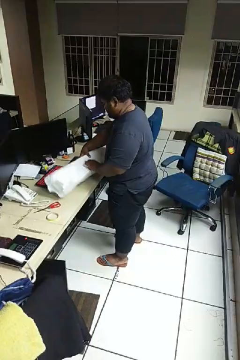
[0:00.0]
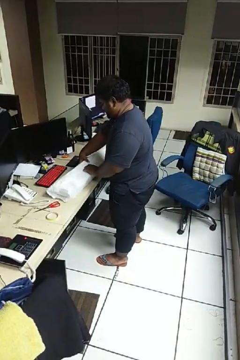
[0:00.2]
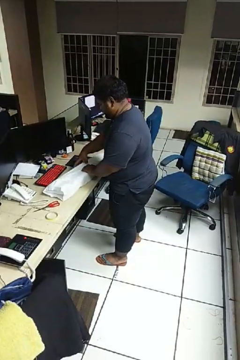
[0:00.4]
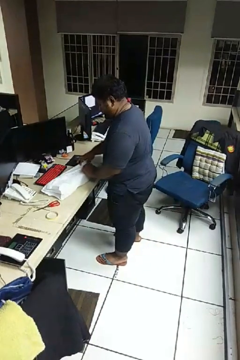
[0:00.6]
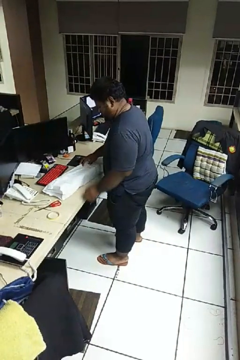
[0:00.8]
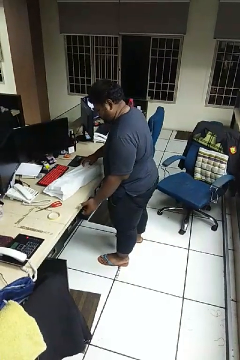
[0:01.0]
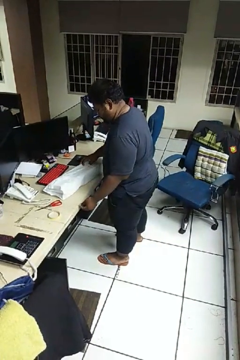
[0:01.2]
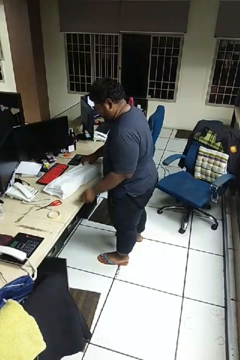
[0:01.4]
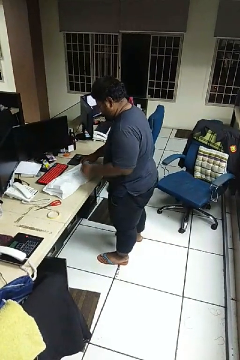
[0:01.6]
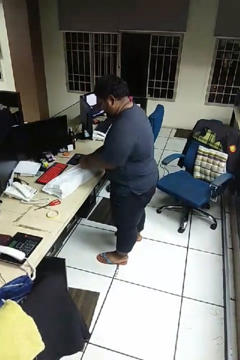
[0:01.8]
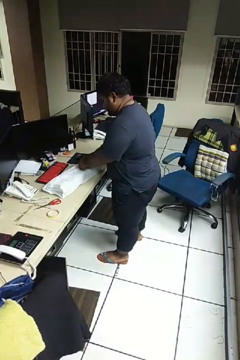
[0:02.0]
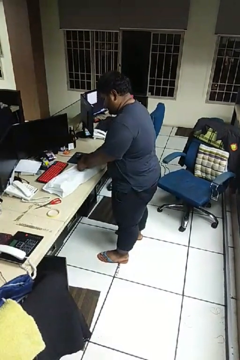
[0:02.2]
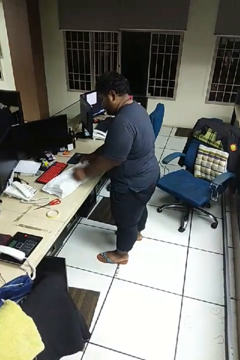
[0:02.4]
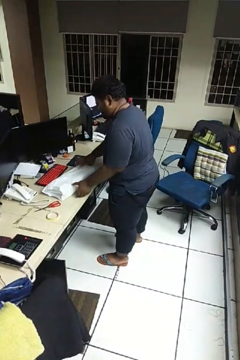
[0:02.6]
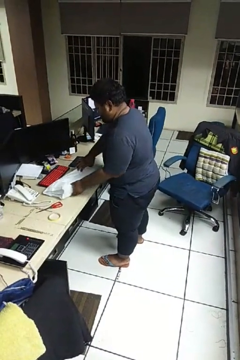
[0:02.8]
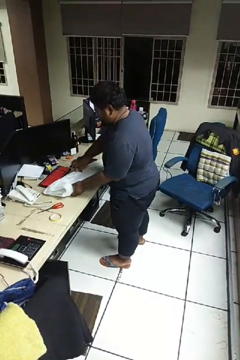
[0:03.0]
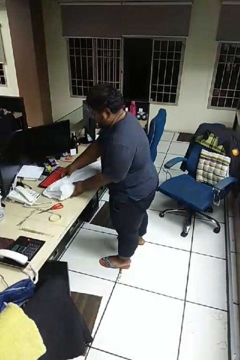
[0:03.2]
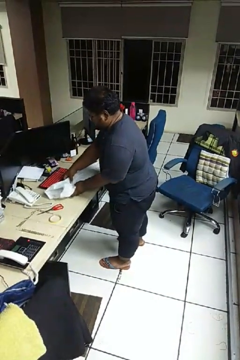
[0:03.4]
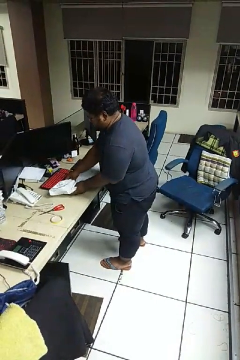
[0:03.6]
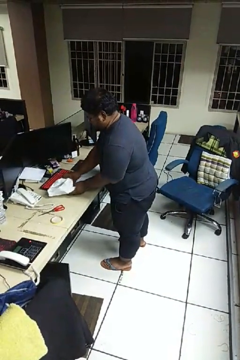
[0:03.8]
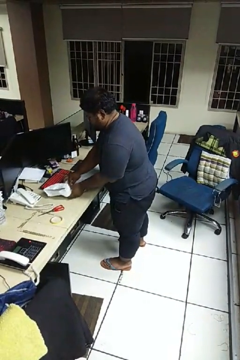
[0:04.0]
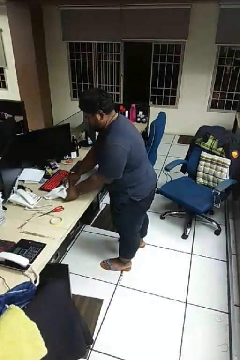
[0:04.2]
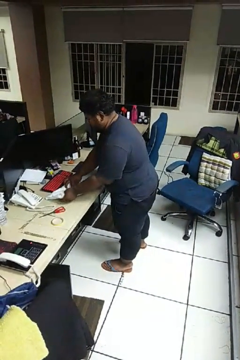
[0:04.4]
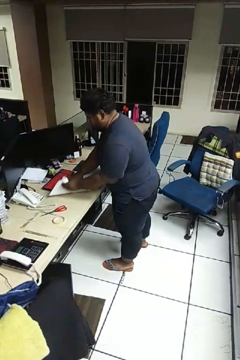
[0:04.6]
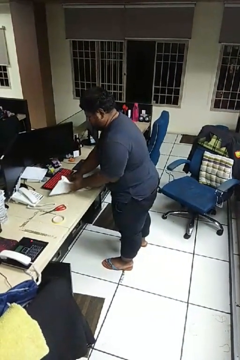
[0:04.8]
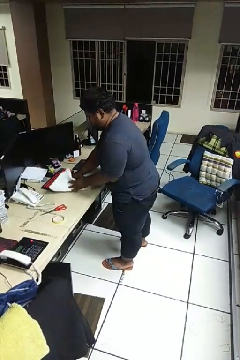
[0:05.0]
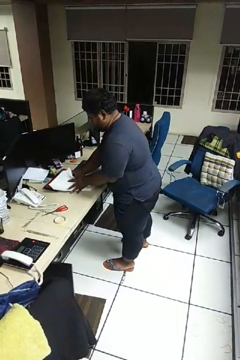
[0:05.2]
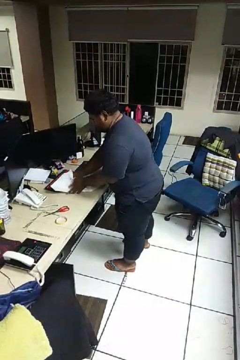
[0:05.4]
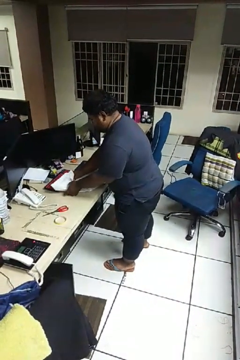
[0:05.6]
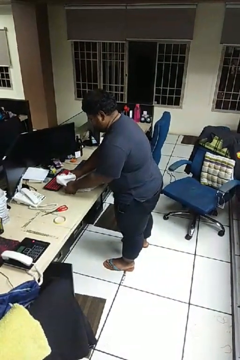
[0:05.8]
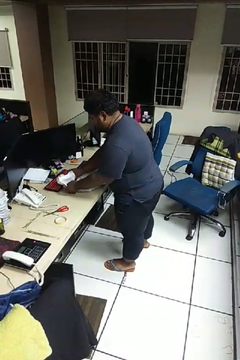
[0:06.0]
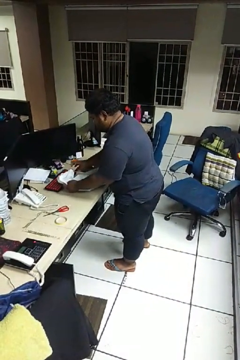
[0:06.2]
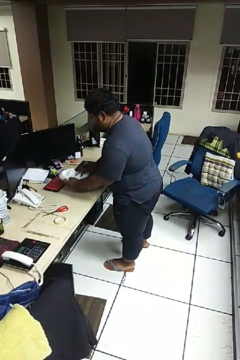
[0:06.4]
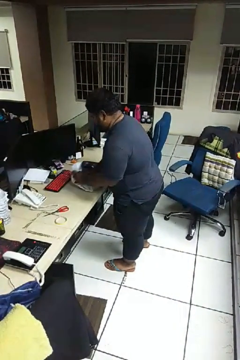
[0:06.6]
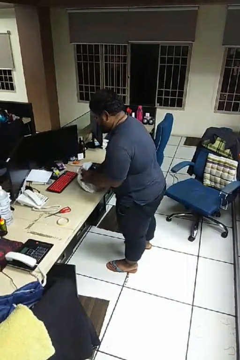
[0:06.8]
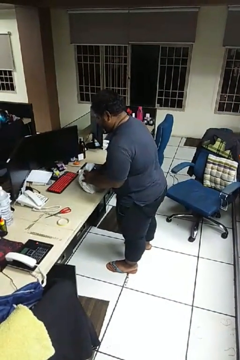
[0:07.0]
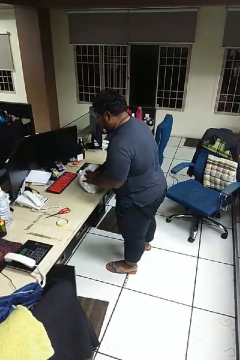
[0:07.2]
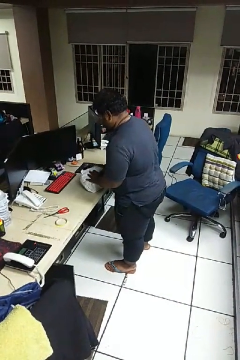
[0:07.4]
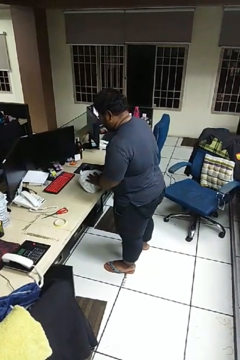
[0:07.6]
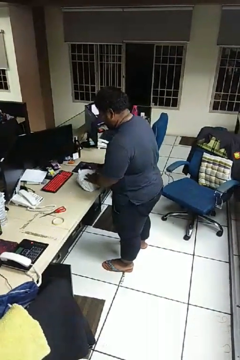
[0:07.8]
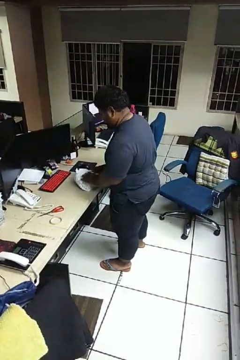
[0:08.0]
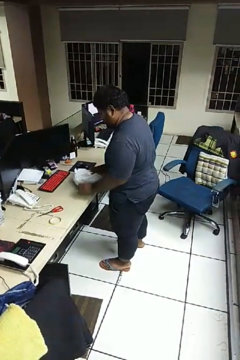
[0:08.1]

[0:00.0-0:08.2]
person wraps box

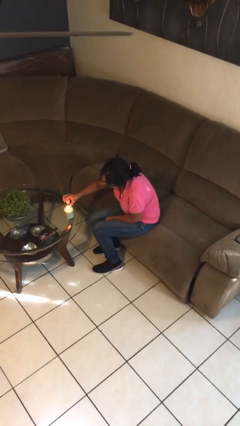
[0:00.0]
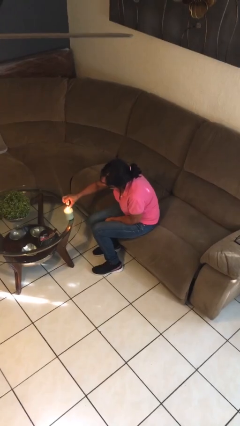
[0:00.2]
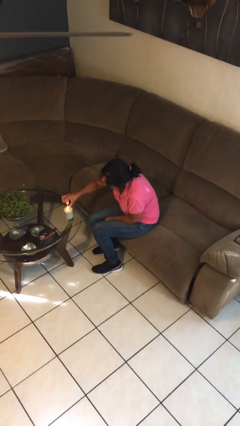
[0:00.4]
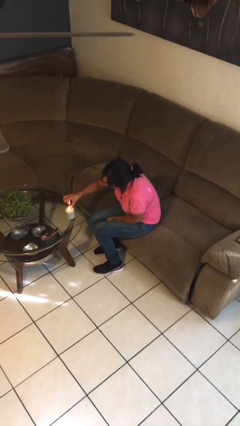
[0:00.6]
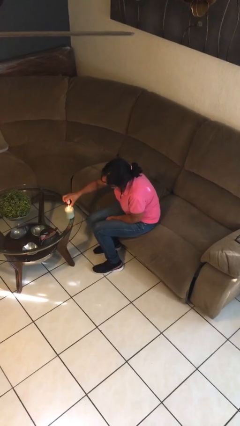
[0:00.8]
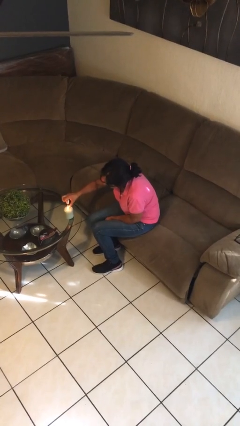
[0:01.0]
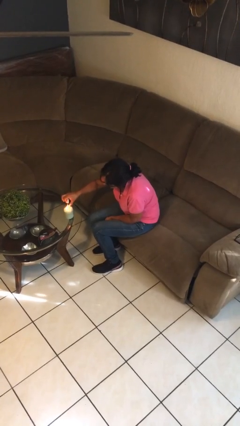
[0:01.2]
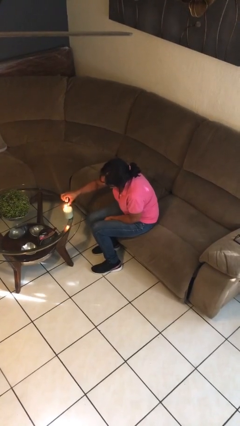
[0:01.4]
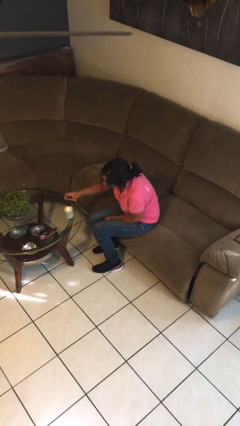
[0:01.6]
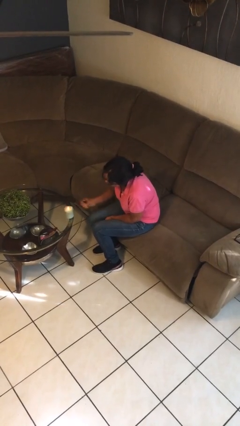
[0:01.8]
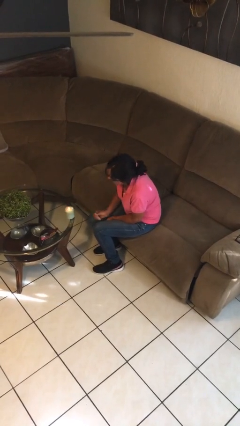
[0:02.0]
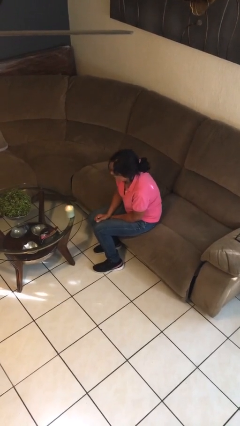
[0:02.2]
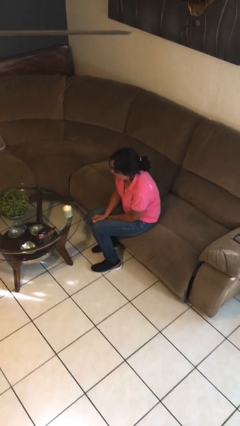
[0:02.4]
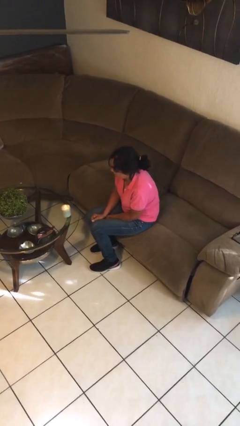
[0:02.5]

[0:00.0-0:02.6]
person lights candle

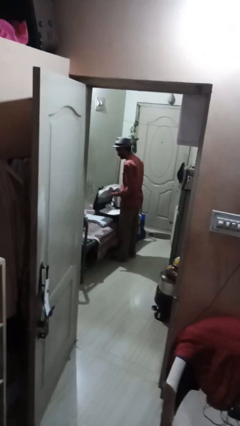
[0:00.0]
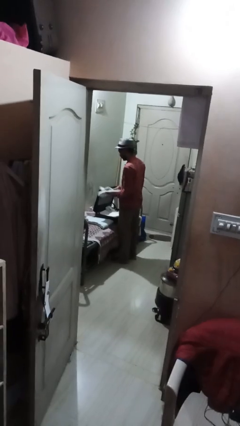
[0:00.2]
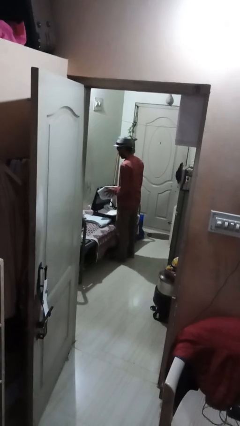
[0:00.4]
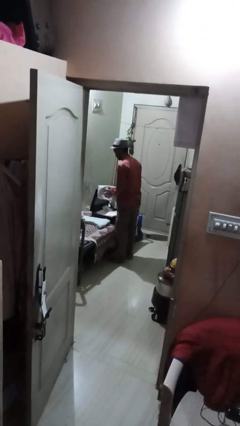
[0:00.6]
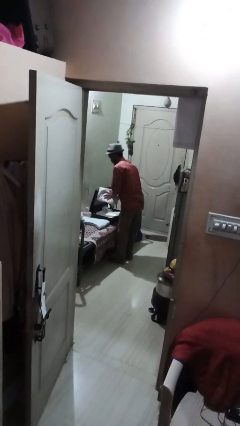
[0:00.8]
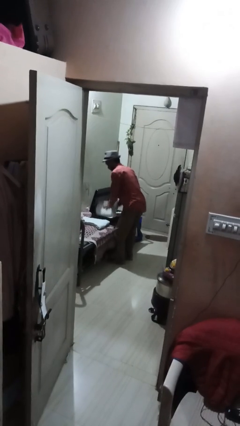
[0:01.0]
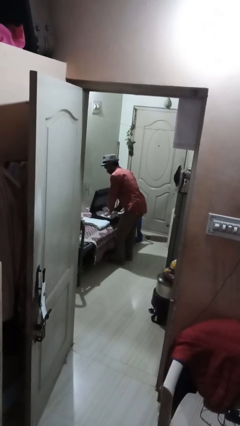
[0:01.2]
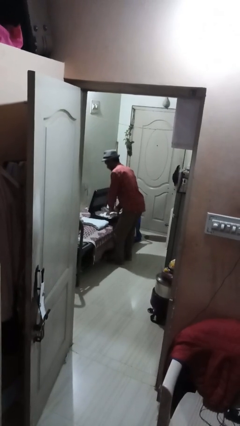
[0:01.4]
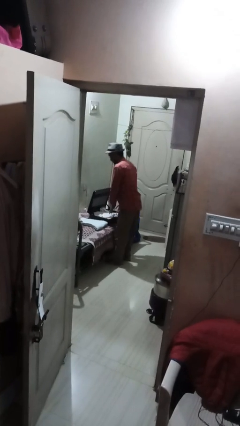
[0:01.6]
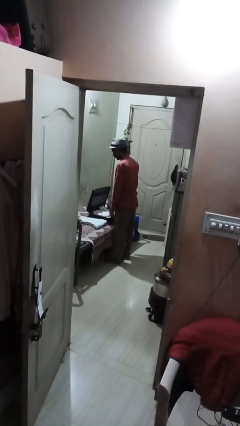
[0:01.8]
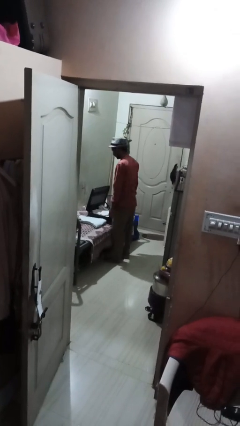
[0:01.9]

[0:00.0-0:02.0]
person loads clothes into suitcase

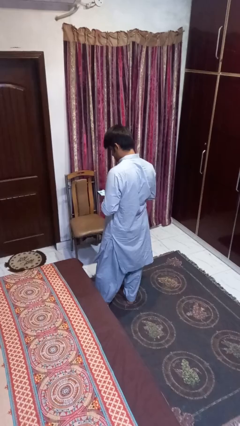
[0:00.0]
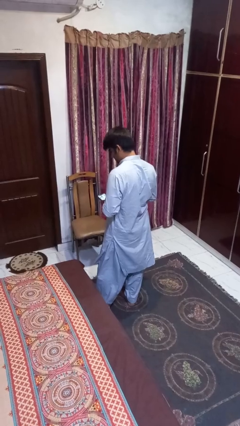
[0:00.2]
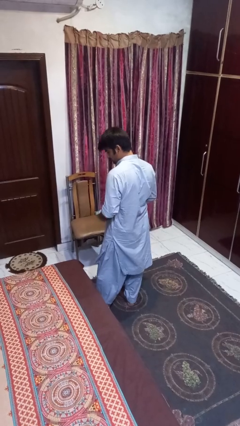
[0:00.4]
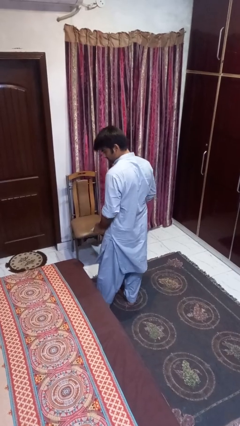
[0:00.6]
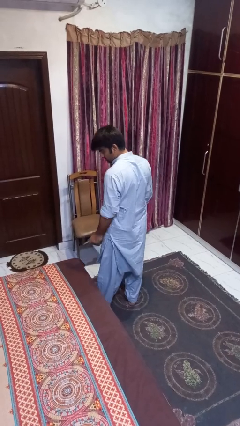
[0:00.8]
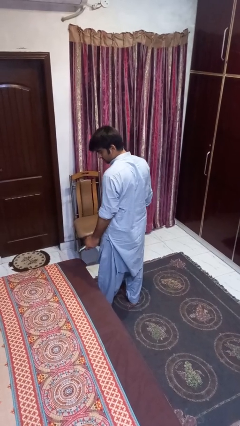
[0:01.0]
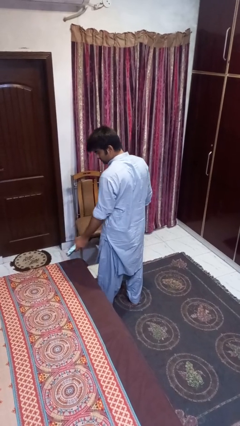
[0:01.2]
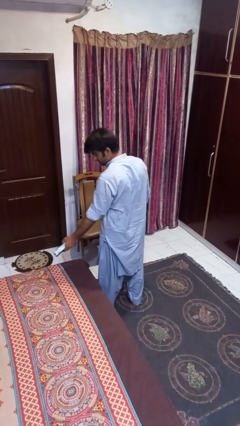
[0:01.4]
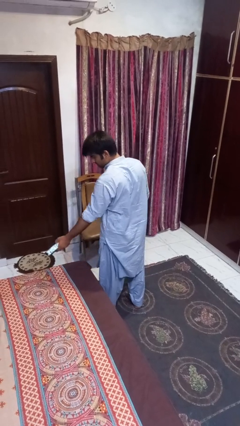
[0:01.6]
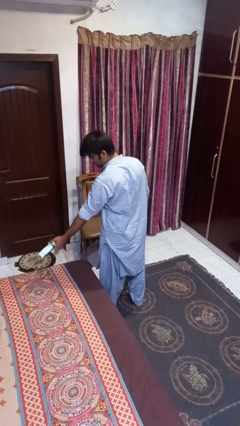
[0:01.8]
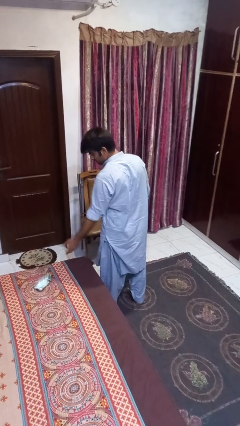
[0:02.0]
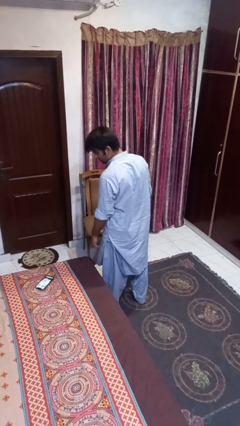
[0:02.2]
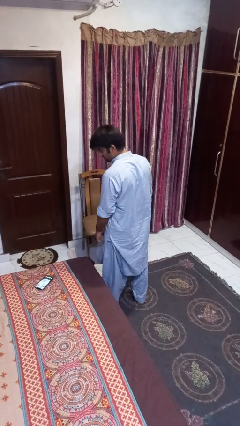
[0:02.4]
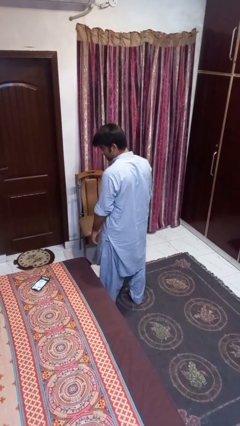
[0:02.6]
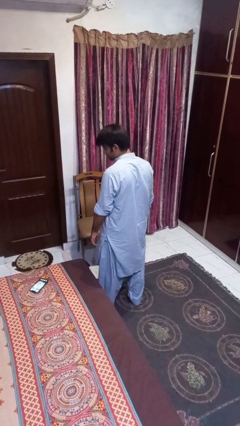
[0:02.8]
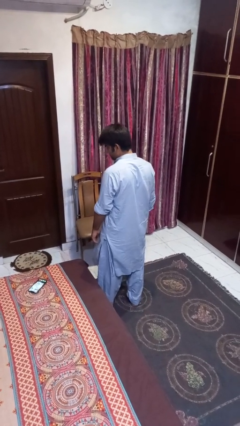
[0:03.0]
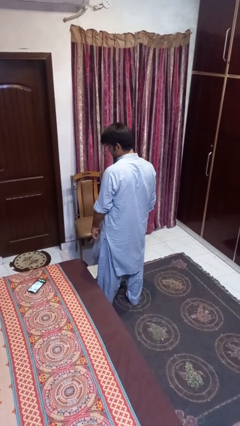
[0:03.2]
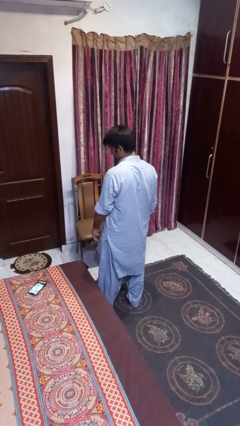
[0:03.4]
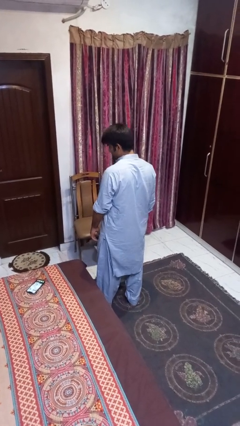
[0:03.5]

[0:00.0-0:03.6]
person throws object on bed

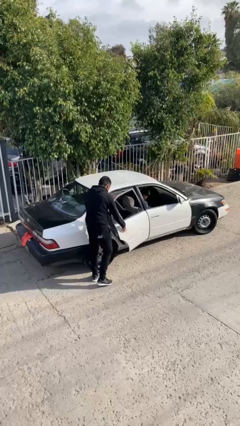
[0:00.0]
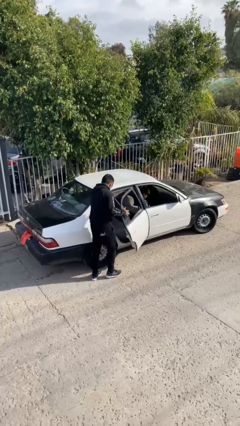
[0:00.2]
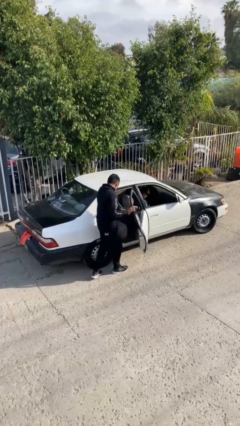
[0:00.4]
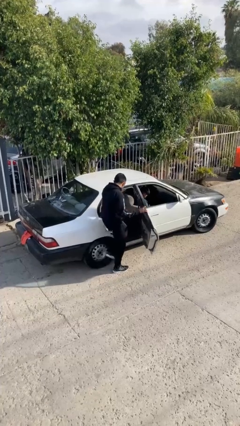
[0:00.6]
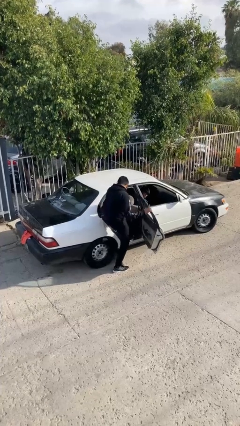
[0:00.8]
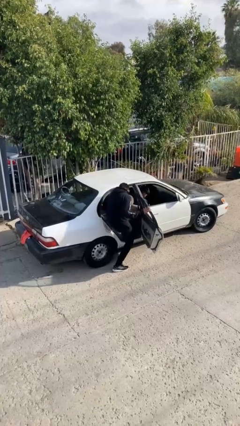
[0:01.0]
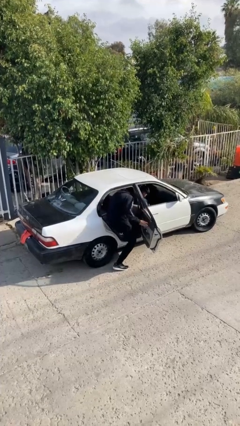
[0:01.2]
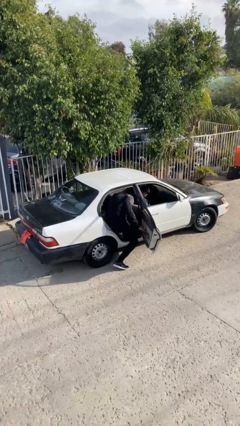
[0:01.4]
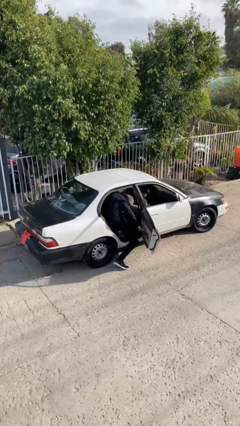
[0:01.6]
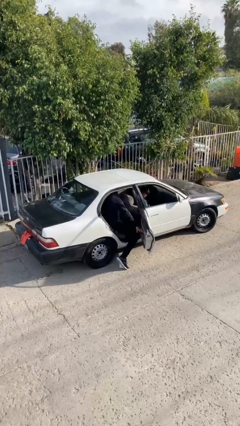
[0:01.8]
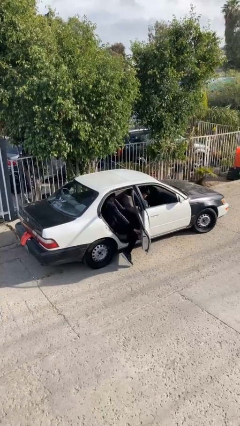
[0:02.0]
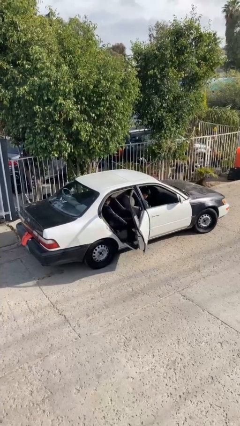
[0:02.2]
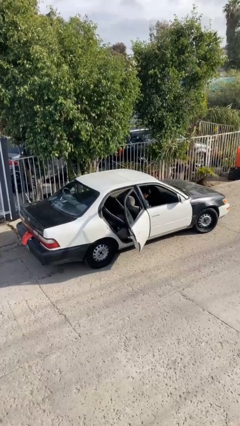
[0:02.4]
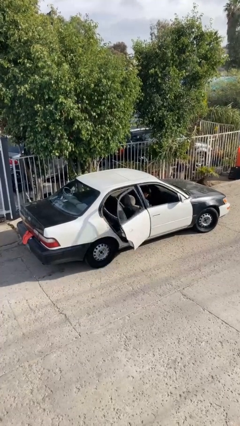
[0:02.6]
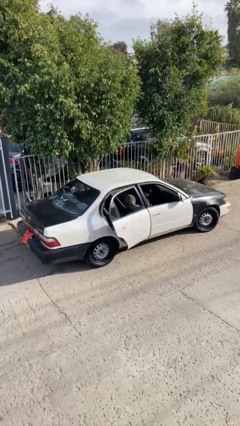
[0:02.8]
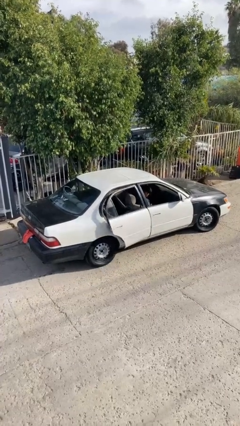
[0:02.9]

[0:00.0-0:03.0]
car picks up person
